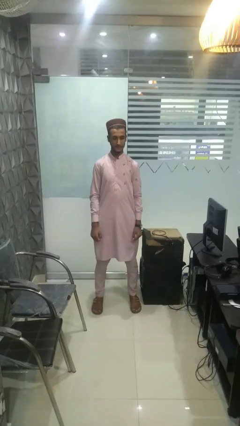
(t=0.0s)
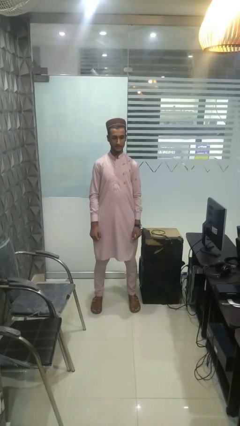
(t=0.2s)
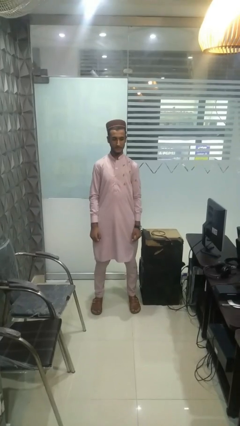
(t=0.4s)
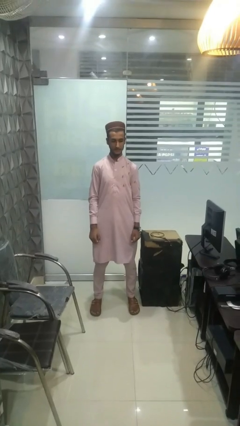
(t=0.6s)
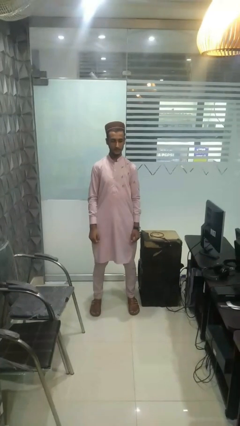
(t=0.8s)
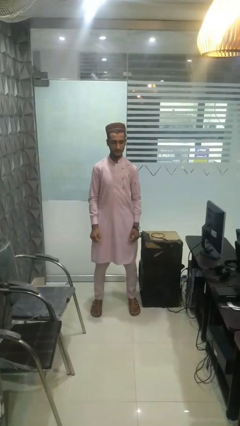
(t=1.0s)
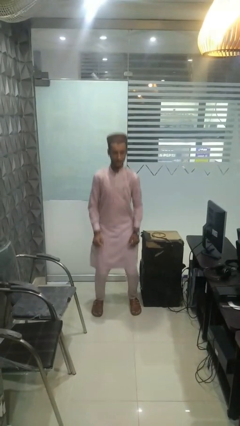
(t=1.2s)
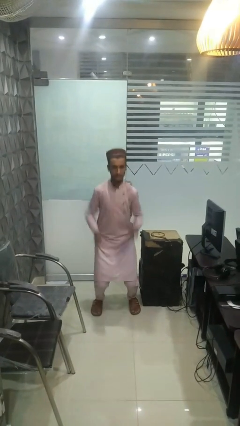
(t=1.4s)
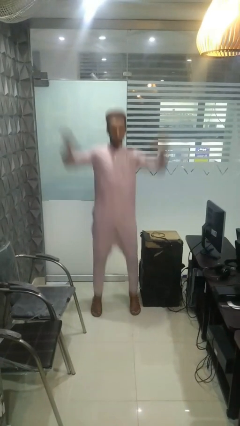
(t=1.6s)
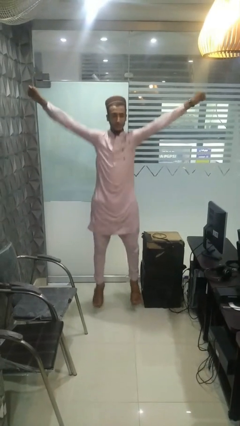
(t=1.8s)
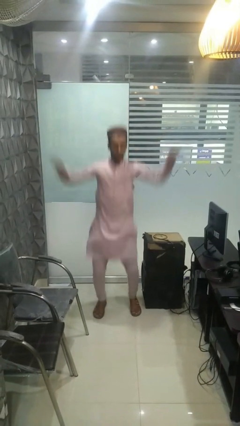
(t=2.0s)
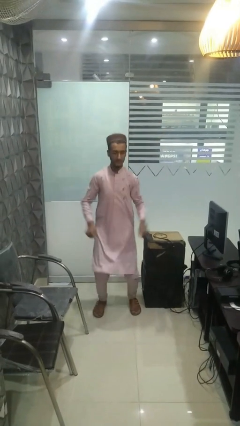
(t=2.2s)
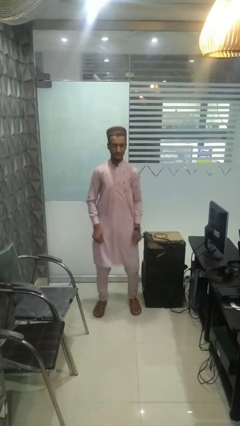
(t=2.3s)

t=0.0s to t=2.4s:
person exercises with jumping jacks

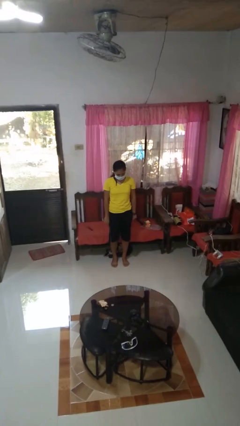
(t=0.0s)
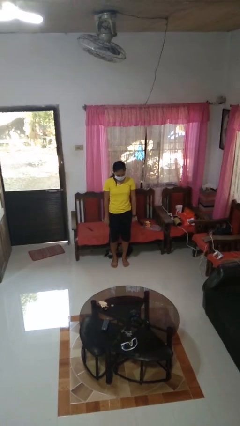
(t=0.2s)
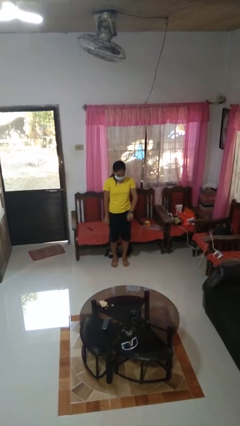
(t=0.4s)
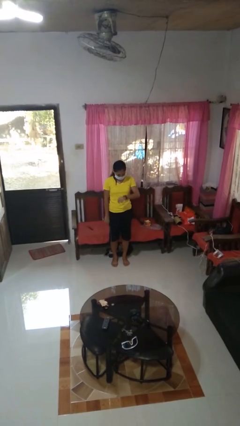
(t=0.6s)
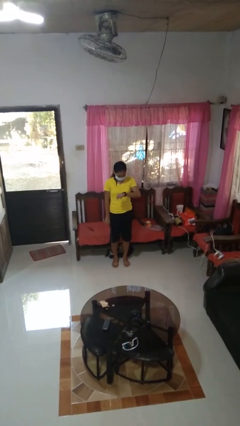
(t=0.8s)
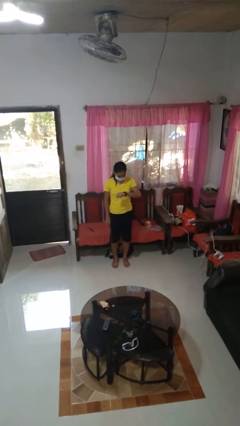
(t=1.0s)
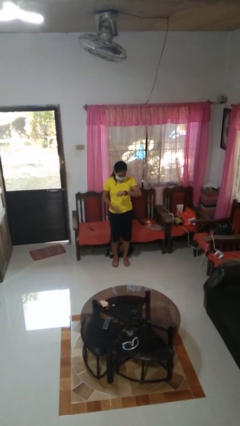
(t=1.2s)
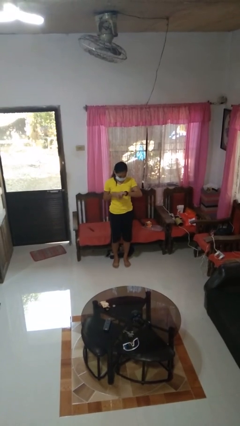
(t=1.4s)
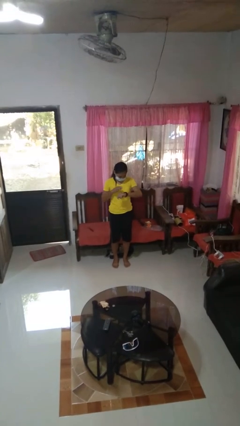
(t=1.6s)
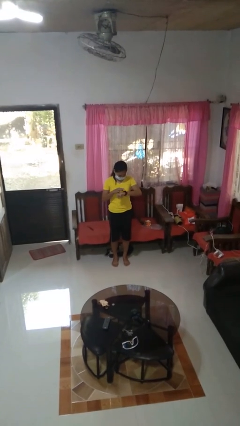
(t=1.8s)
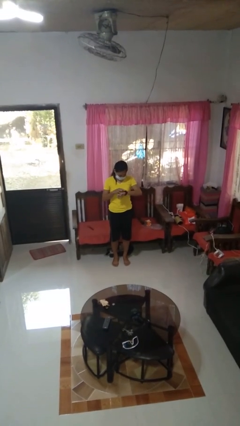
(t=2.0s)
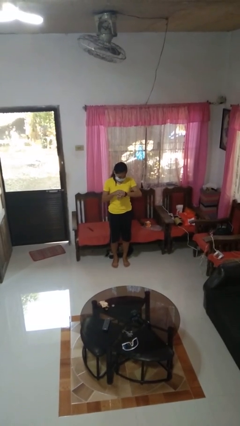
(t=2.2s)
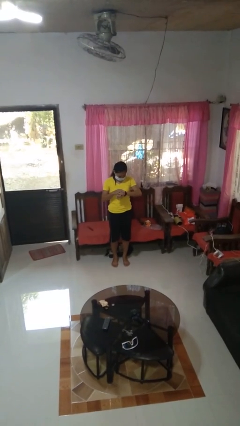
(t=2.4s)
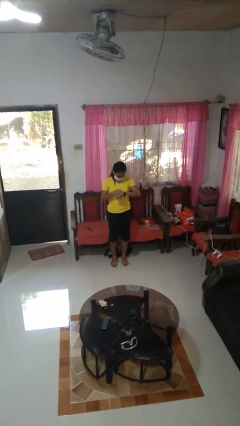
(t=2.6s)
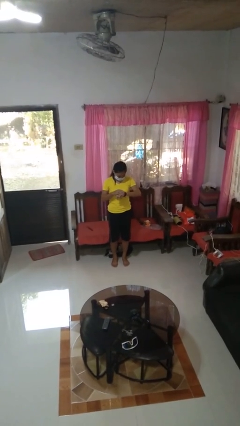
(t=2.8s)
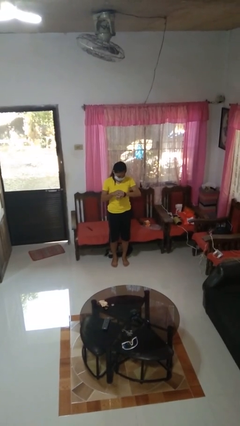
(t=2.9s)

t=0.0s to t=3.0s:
person looks at wristwatch

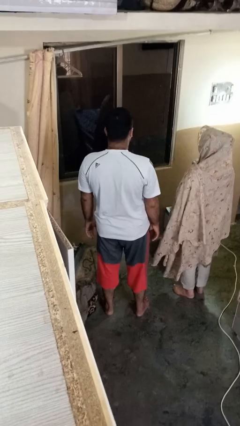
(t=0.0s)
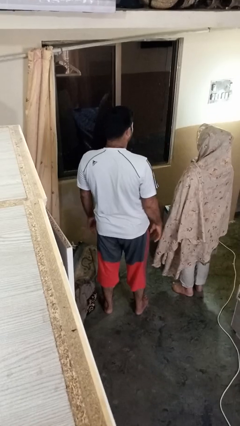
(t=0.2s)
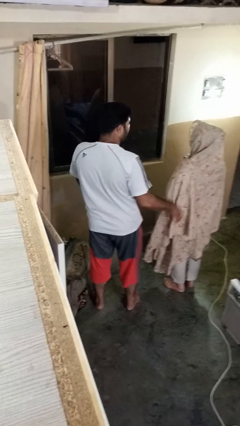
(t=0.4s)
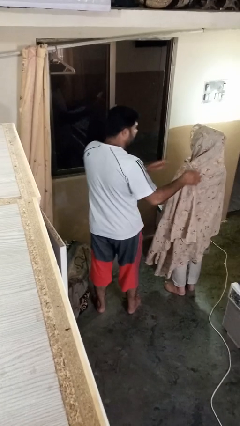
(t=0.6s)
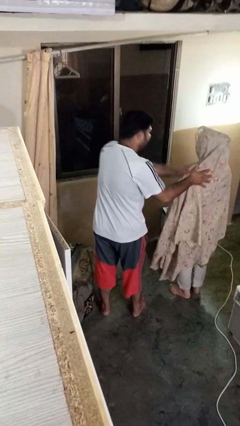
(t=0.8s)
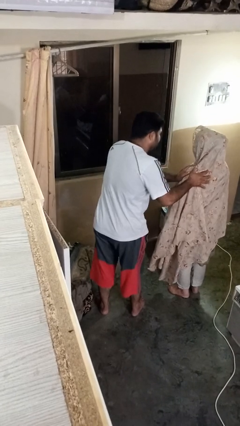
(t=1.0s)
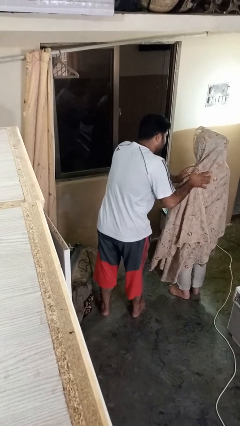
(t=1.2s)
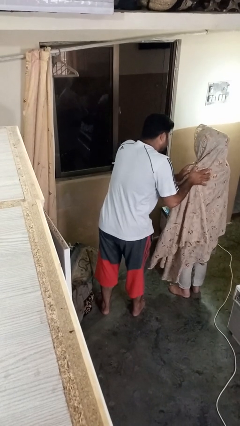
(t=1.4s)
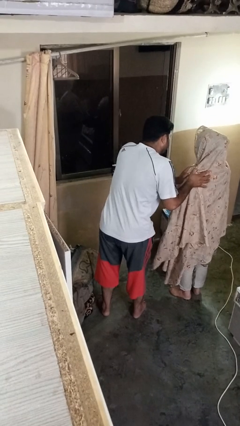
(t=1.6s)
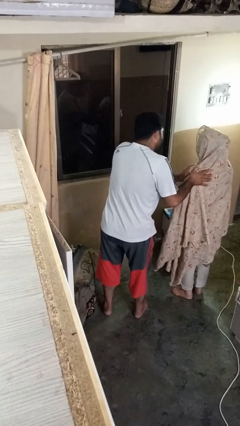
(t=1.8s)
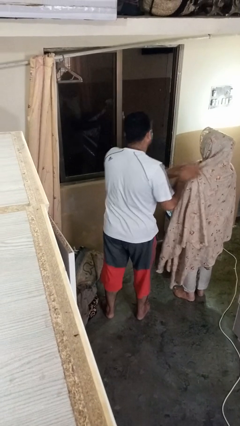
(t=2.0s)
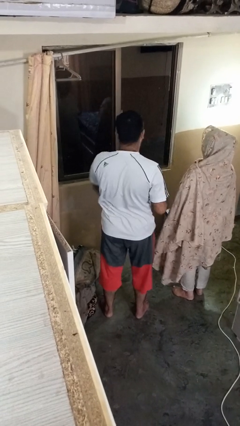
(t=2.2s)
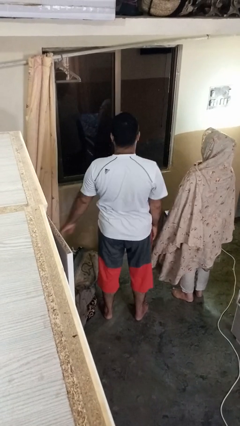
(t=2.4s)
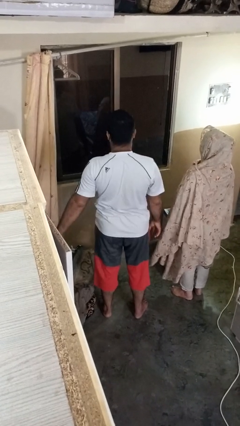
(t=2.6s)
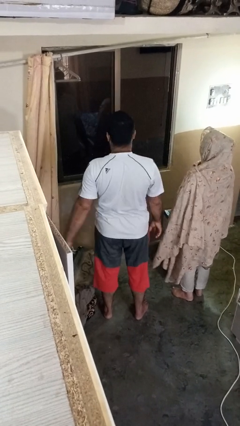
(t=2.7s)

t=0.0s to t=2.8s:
person shoves person

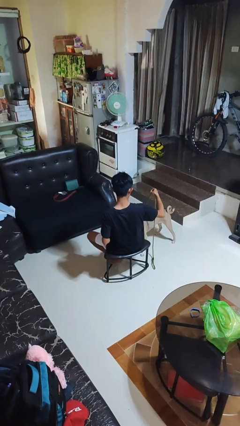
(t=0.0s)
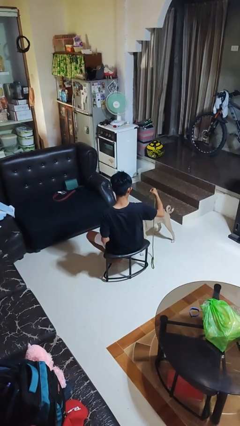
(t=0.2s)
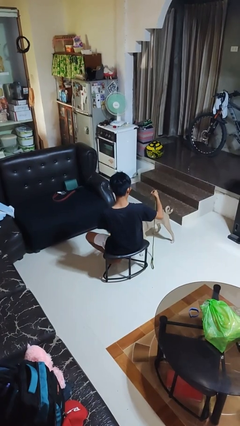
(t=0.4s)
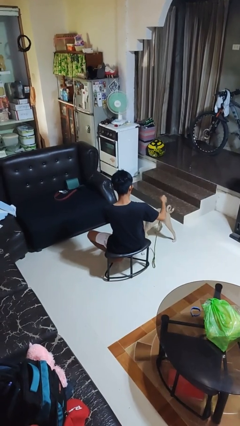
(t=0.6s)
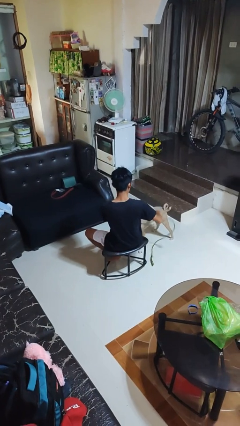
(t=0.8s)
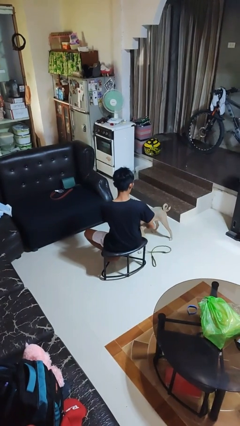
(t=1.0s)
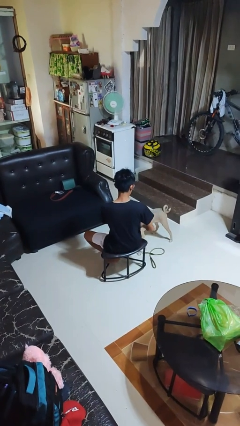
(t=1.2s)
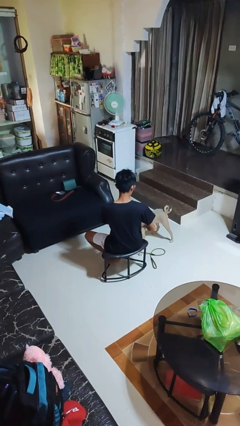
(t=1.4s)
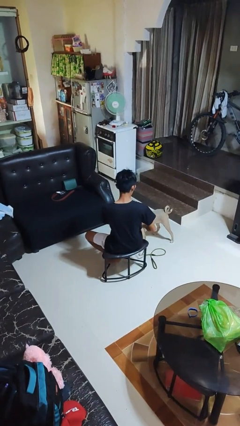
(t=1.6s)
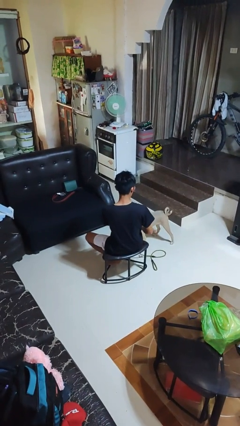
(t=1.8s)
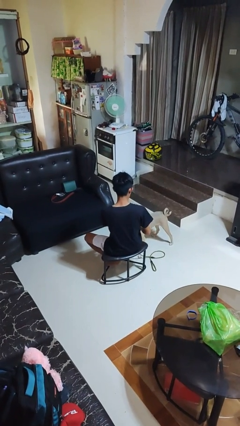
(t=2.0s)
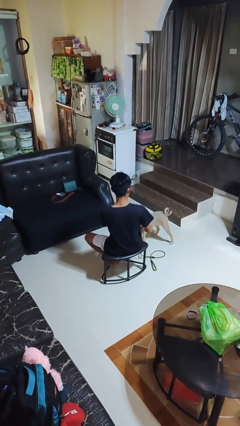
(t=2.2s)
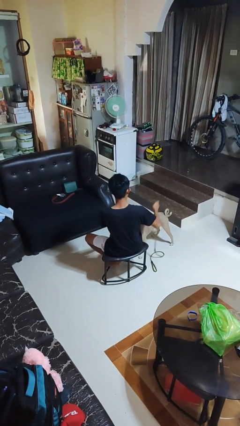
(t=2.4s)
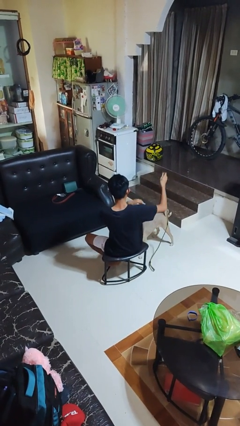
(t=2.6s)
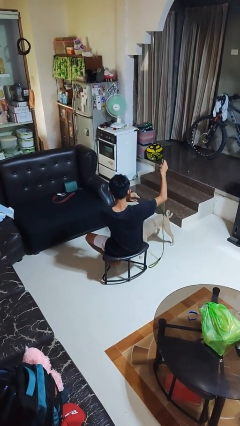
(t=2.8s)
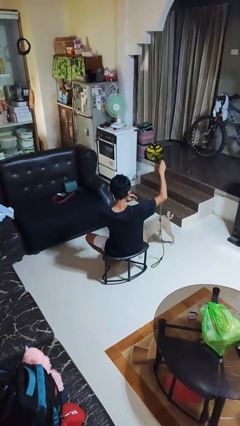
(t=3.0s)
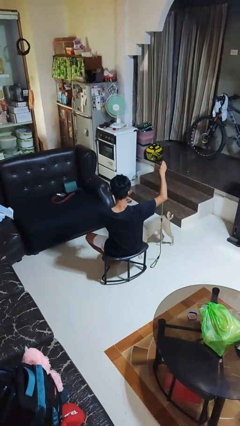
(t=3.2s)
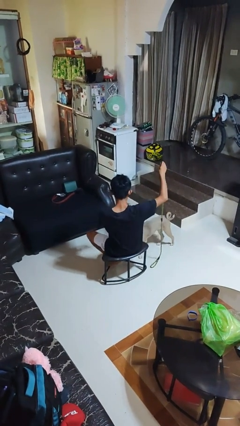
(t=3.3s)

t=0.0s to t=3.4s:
person unattaches leash from dog

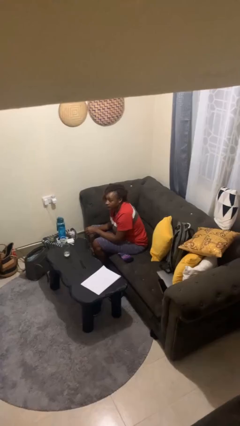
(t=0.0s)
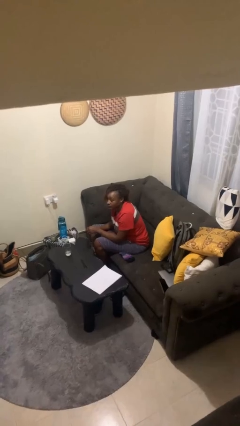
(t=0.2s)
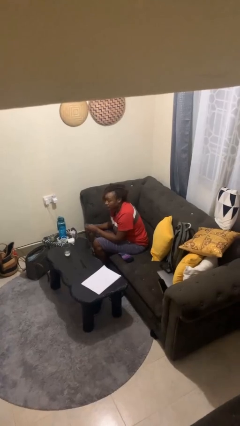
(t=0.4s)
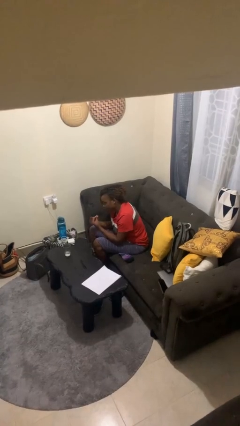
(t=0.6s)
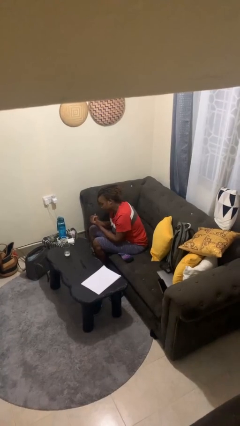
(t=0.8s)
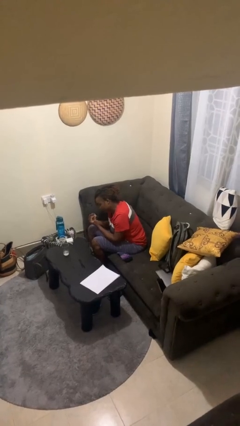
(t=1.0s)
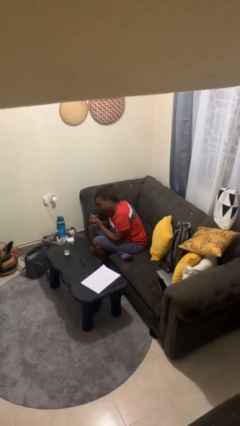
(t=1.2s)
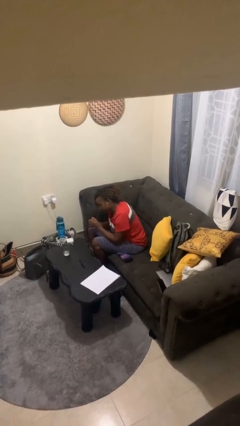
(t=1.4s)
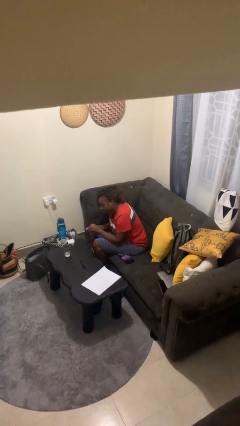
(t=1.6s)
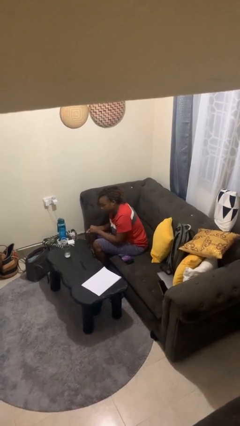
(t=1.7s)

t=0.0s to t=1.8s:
person snaps fingers

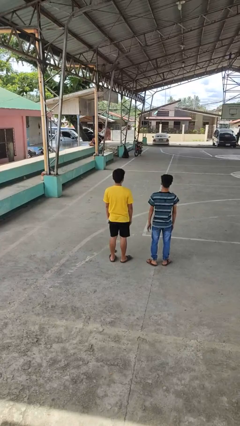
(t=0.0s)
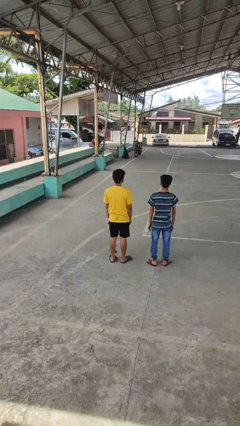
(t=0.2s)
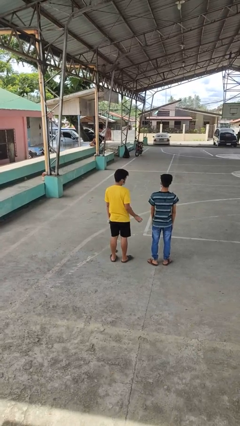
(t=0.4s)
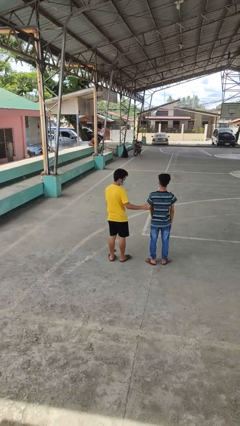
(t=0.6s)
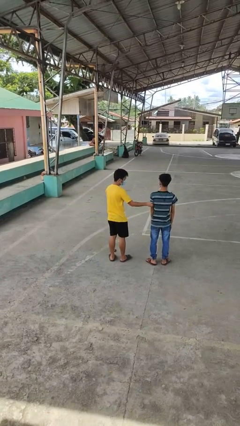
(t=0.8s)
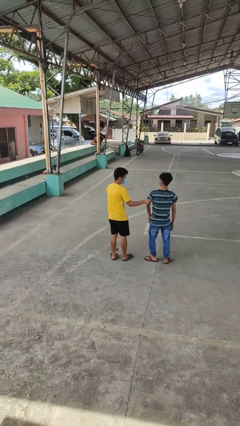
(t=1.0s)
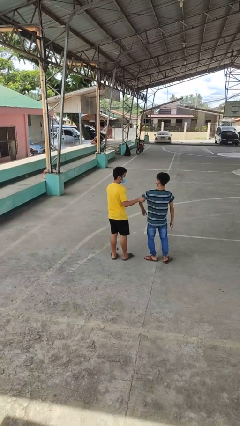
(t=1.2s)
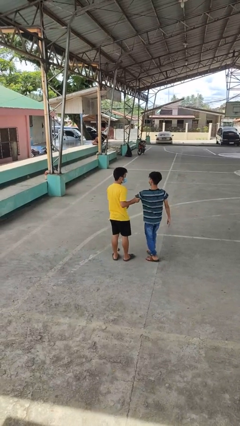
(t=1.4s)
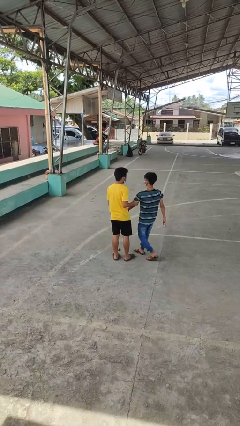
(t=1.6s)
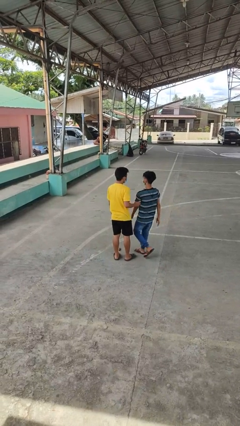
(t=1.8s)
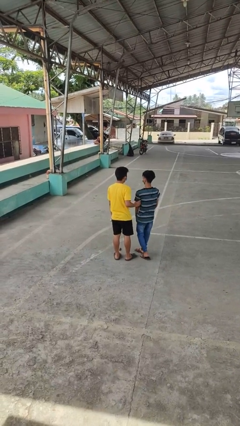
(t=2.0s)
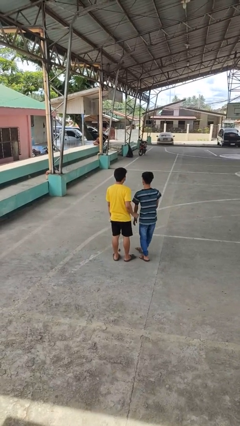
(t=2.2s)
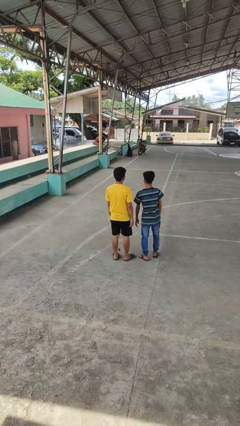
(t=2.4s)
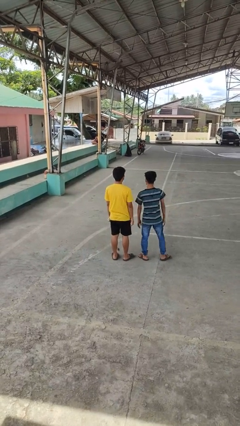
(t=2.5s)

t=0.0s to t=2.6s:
person grabs person by bicep

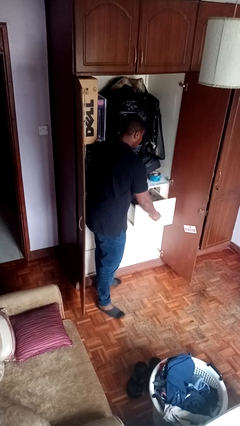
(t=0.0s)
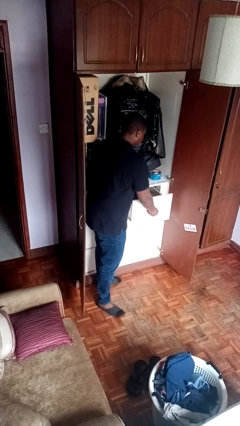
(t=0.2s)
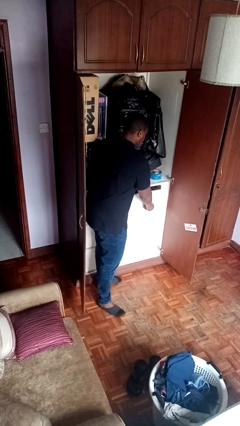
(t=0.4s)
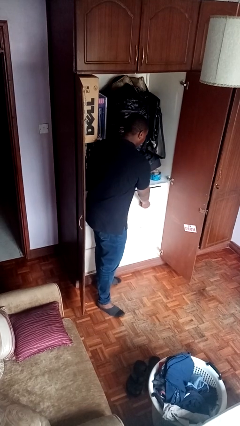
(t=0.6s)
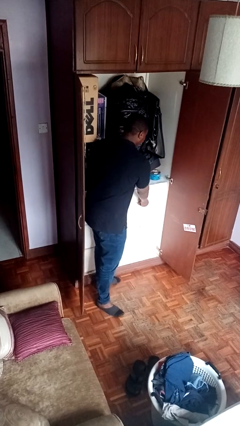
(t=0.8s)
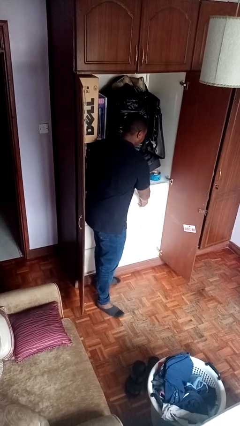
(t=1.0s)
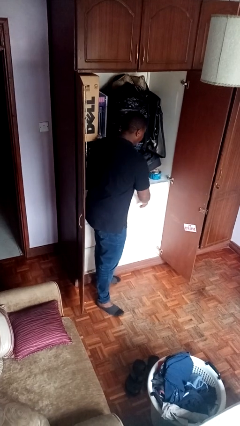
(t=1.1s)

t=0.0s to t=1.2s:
person closes dresser drawer
